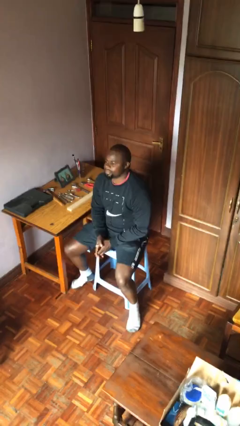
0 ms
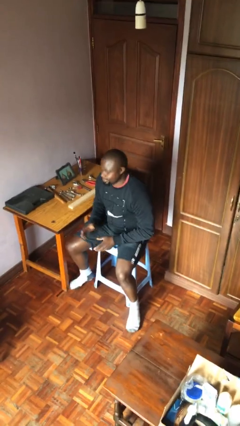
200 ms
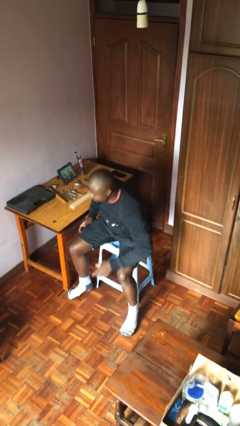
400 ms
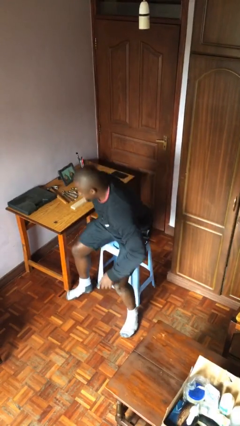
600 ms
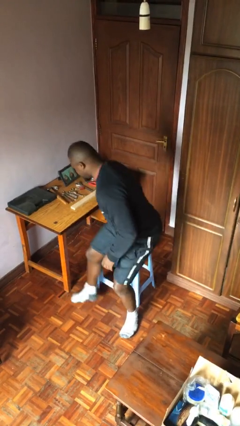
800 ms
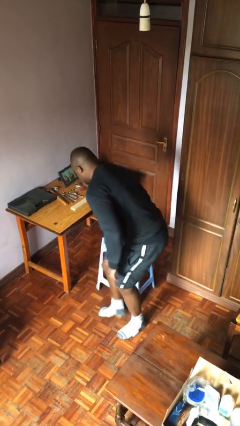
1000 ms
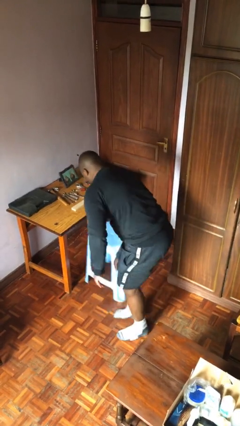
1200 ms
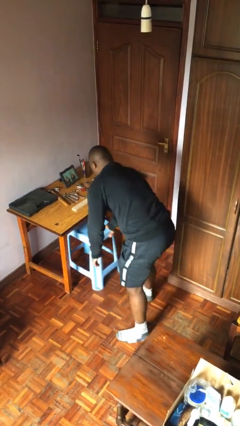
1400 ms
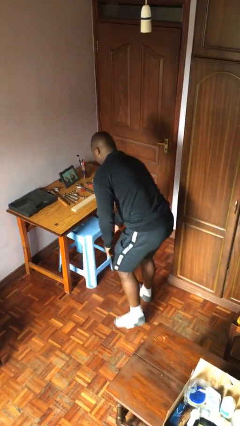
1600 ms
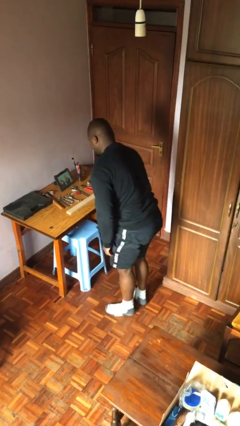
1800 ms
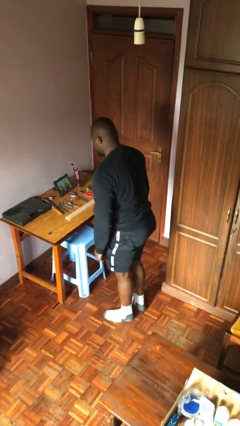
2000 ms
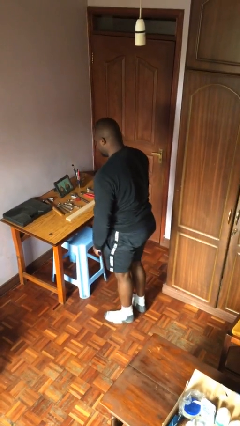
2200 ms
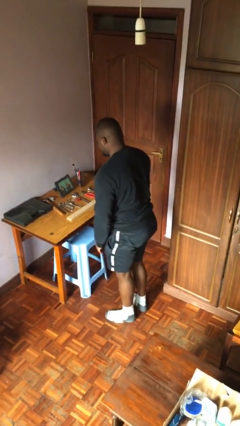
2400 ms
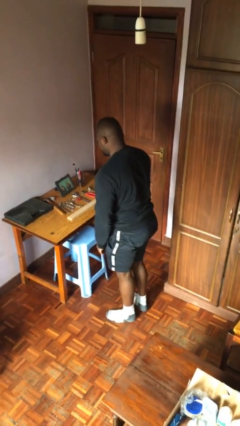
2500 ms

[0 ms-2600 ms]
person stands up

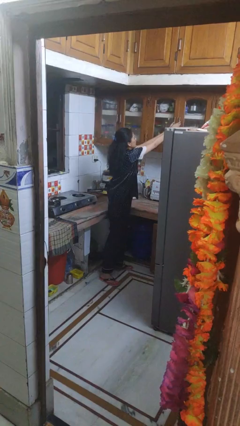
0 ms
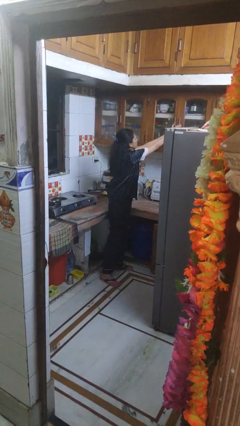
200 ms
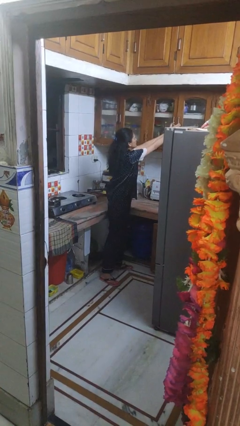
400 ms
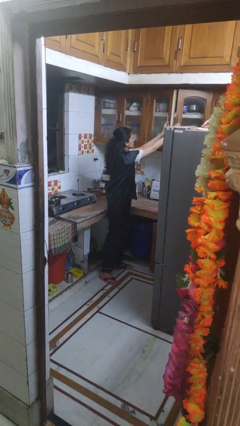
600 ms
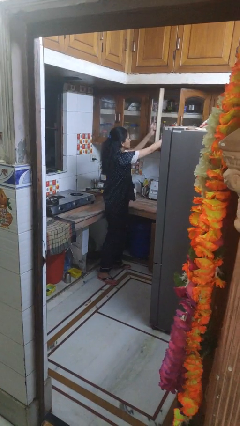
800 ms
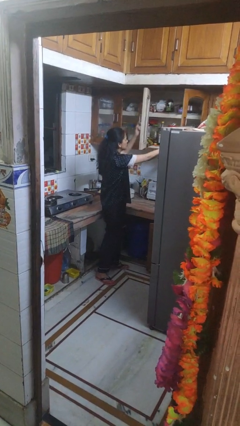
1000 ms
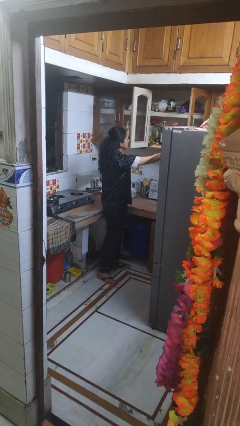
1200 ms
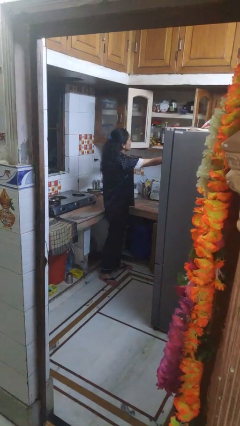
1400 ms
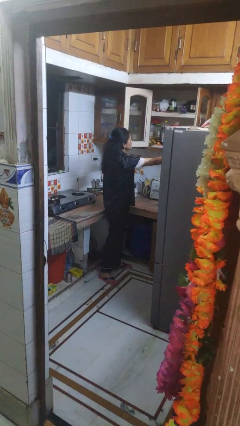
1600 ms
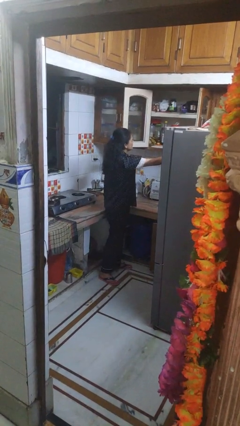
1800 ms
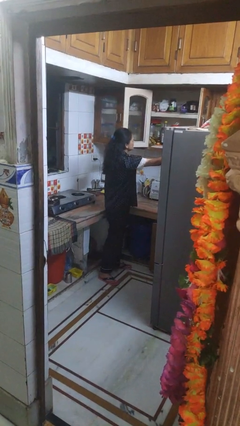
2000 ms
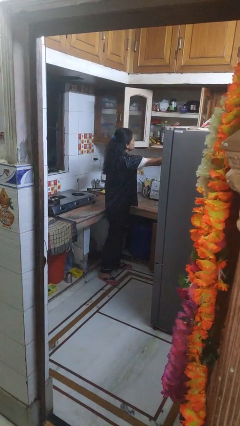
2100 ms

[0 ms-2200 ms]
person opens cabinet

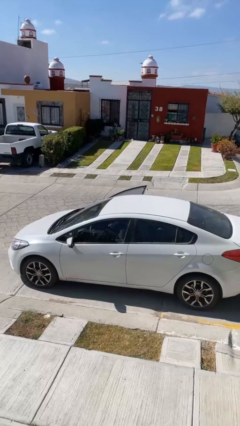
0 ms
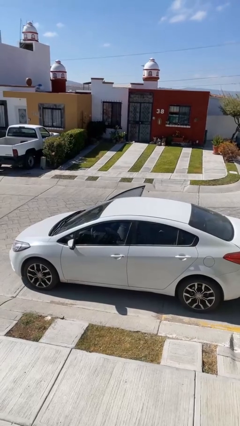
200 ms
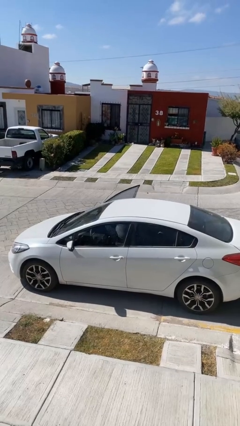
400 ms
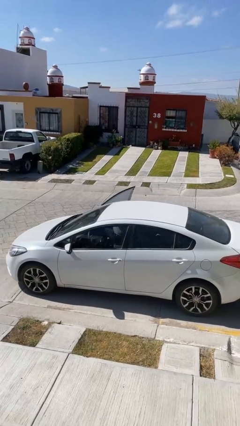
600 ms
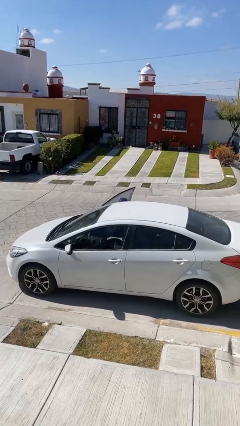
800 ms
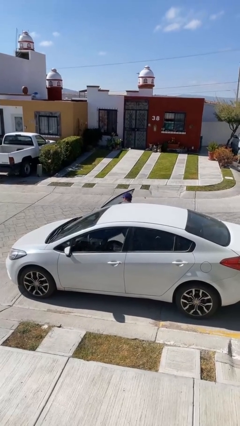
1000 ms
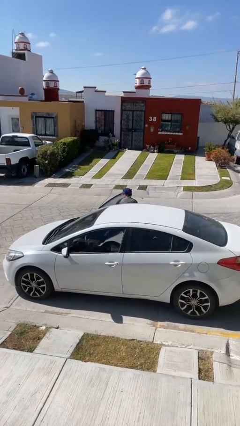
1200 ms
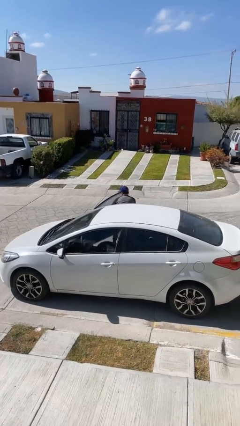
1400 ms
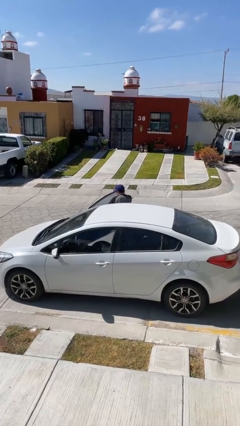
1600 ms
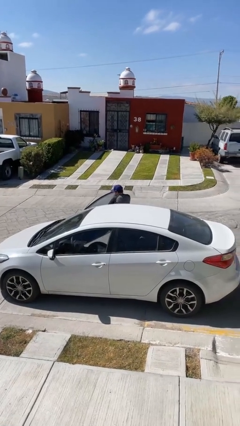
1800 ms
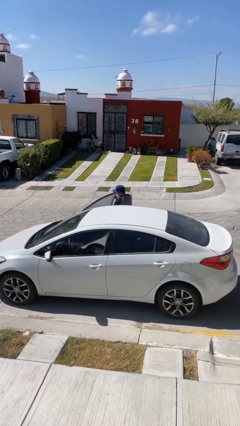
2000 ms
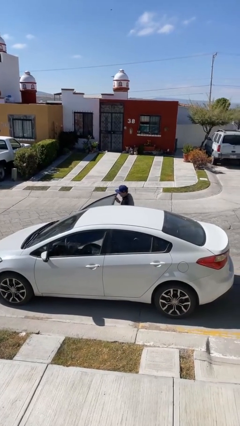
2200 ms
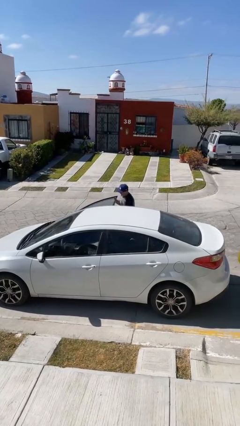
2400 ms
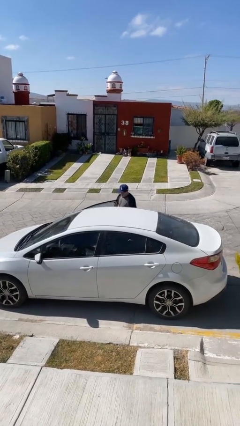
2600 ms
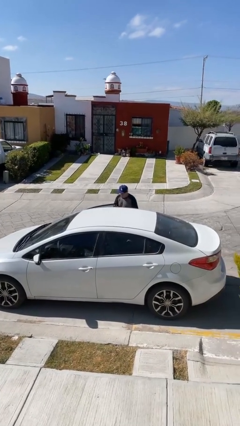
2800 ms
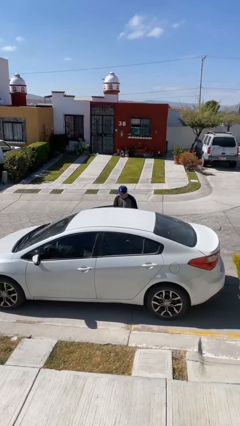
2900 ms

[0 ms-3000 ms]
car drops off person

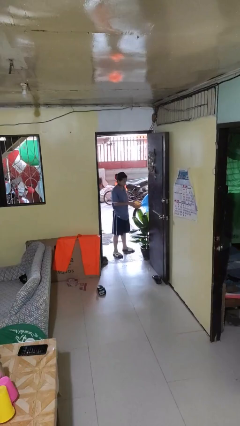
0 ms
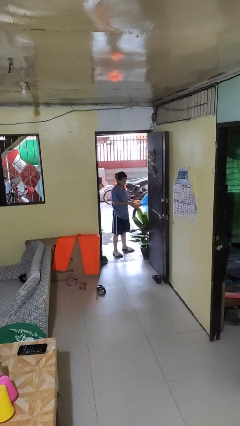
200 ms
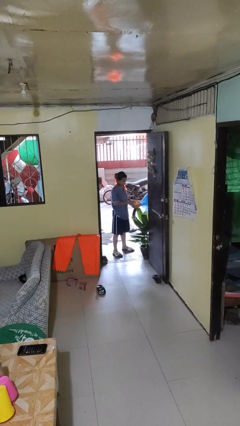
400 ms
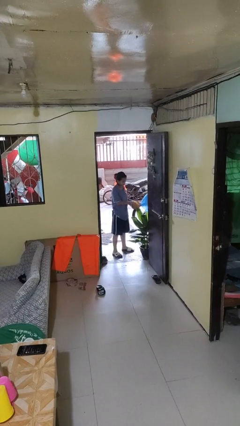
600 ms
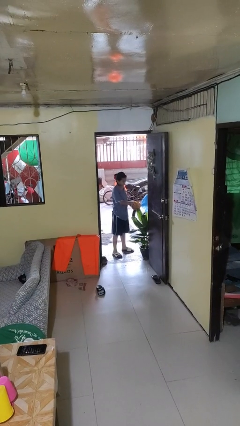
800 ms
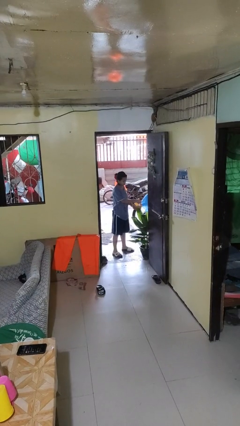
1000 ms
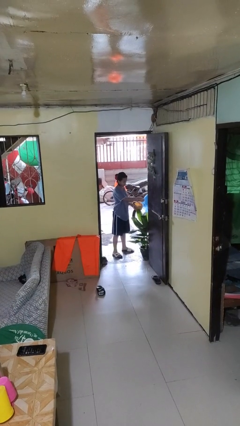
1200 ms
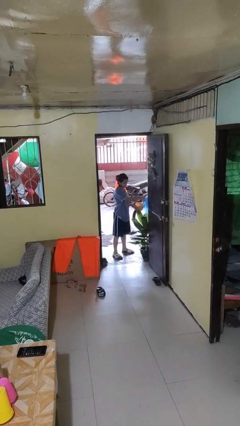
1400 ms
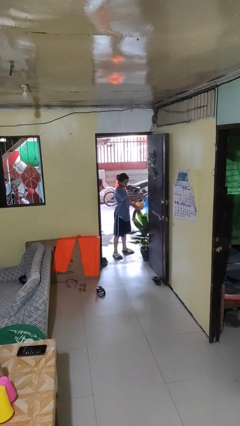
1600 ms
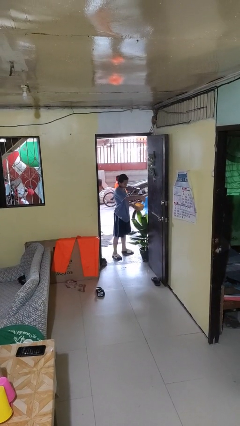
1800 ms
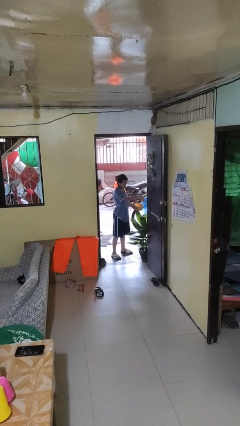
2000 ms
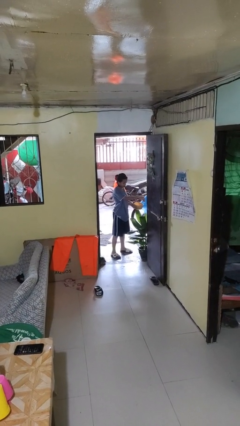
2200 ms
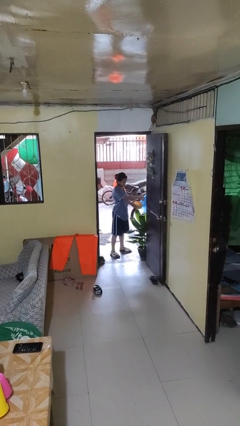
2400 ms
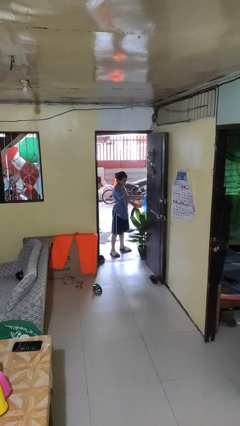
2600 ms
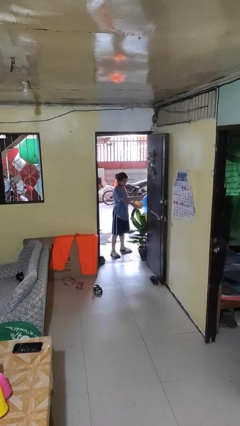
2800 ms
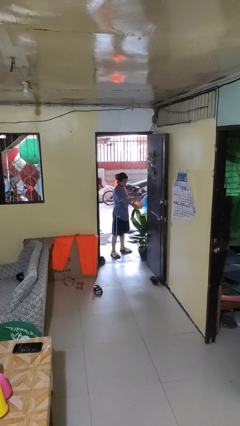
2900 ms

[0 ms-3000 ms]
person waters houseplant

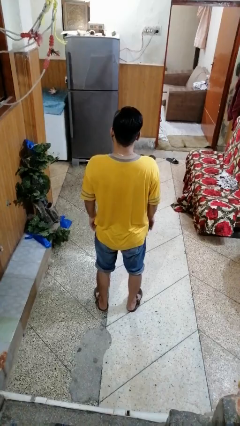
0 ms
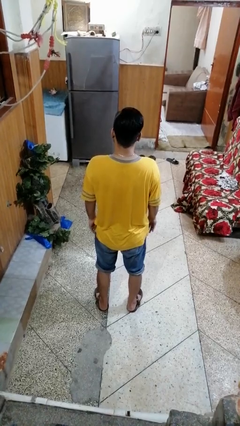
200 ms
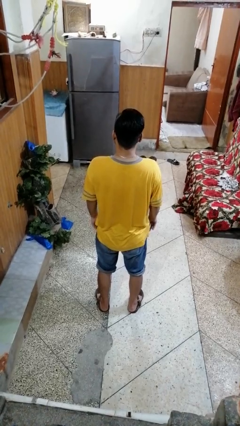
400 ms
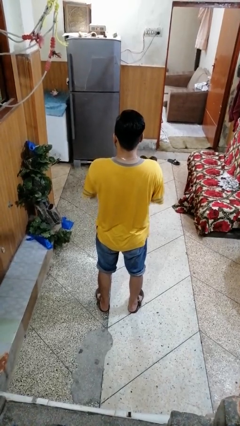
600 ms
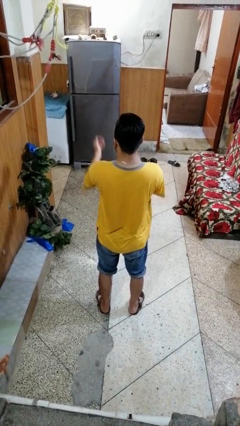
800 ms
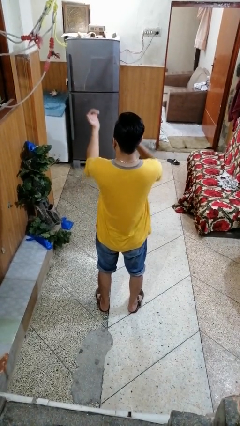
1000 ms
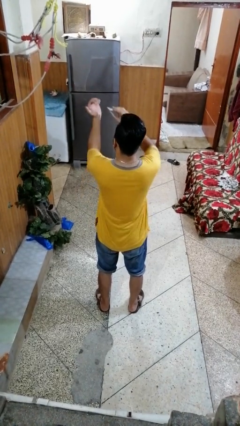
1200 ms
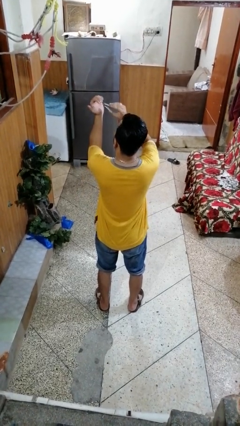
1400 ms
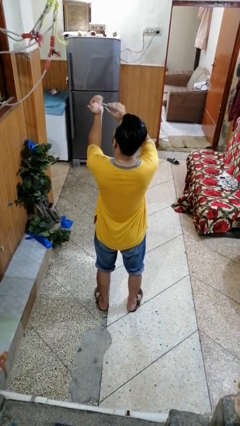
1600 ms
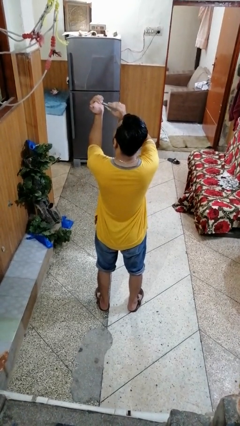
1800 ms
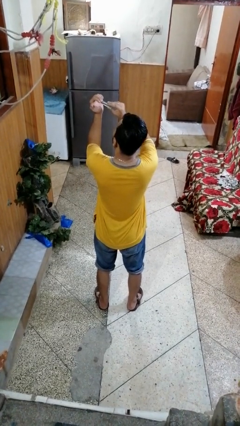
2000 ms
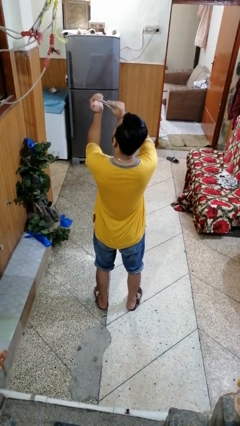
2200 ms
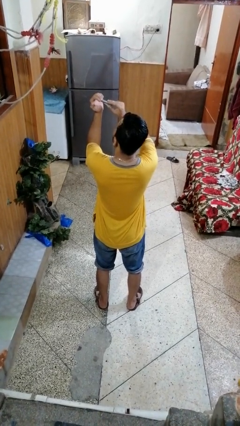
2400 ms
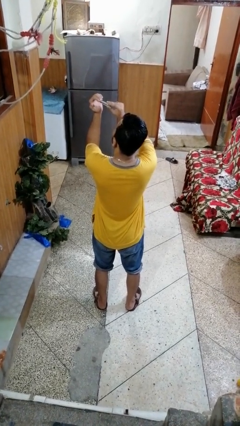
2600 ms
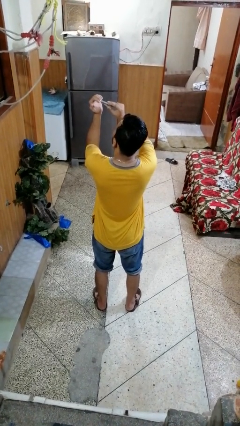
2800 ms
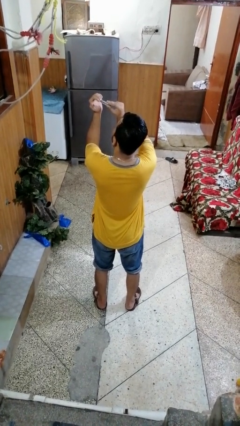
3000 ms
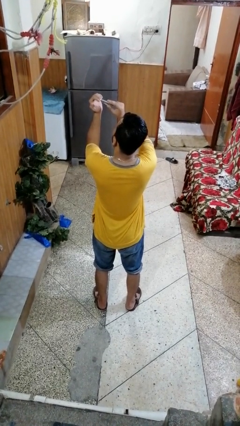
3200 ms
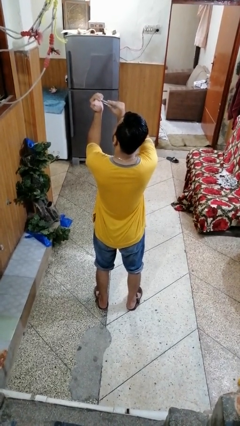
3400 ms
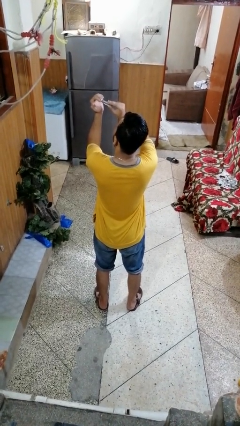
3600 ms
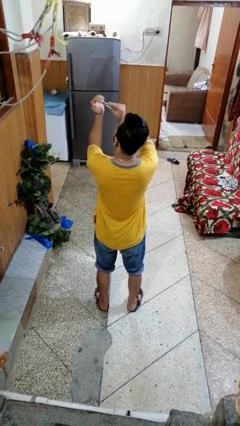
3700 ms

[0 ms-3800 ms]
person clips fingernails

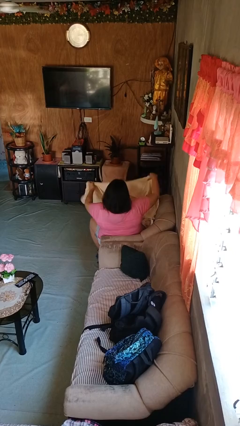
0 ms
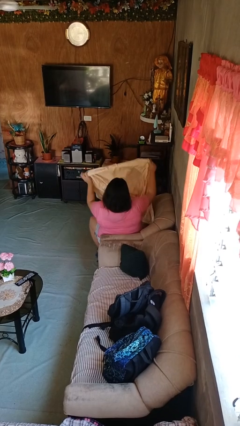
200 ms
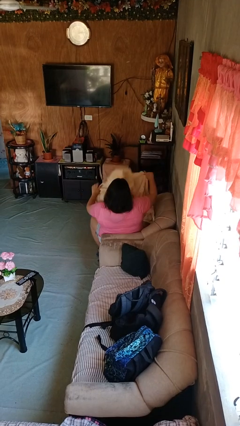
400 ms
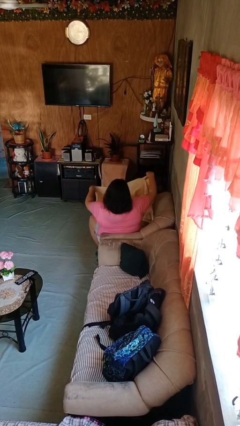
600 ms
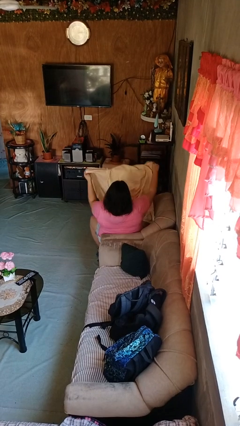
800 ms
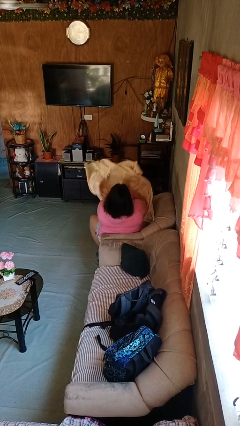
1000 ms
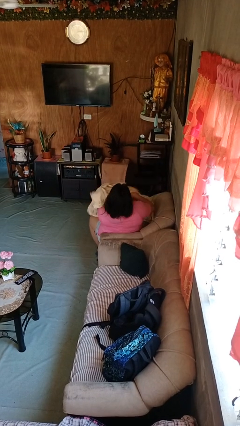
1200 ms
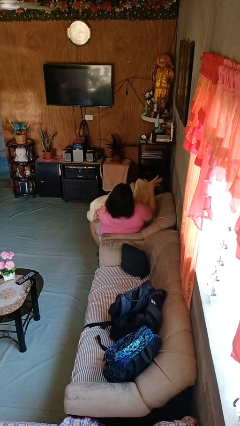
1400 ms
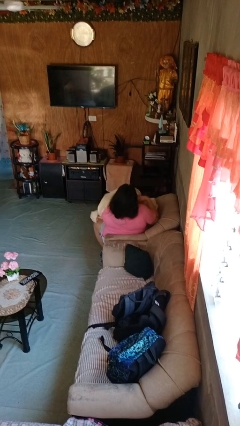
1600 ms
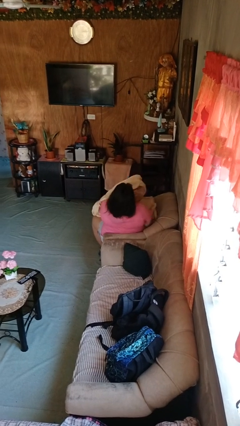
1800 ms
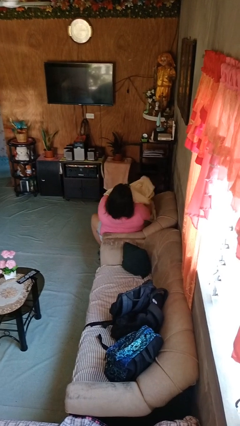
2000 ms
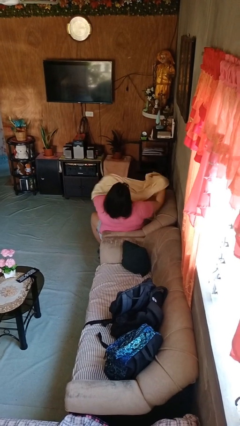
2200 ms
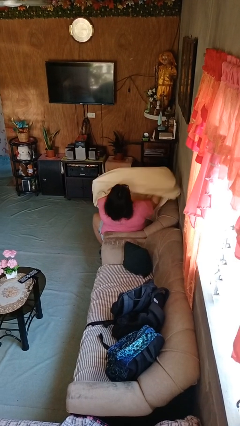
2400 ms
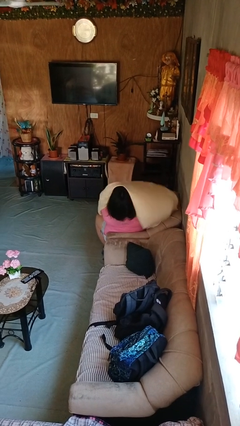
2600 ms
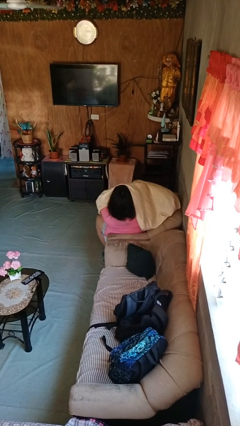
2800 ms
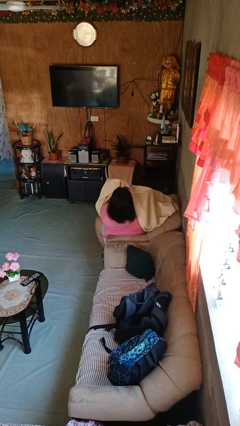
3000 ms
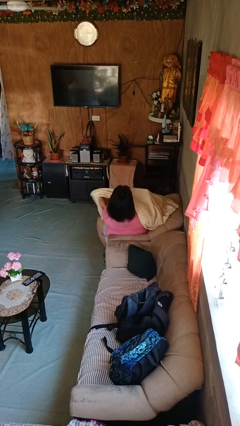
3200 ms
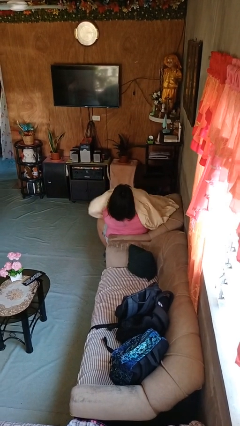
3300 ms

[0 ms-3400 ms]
person covers with blanket
